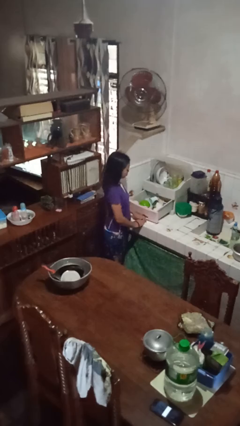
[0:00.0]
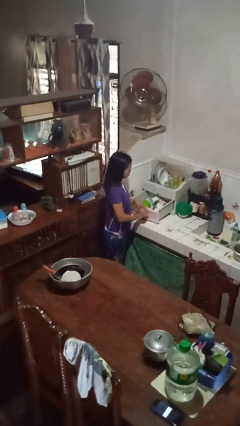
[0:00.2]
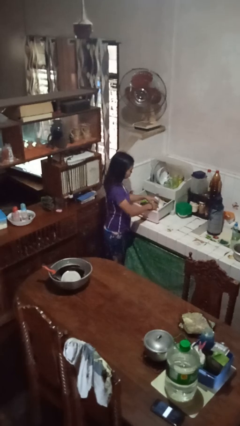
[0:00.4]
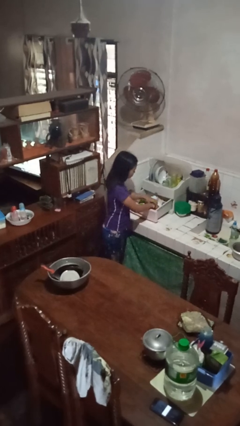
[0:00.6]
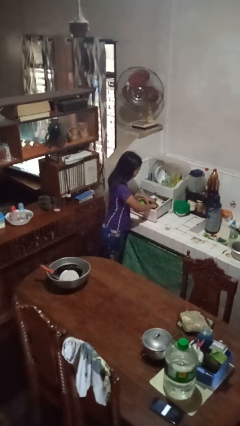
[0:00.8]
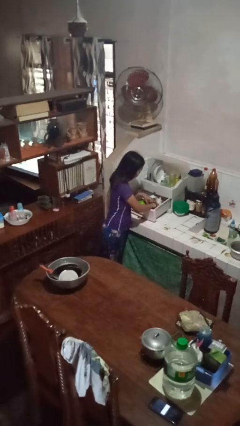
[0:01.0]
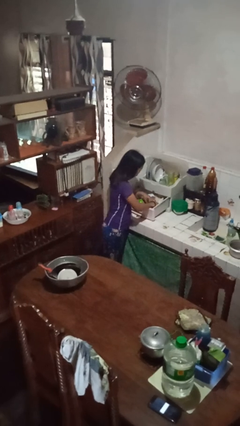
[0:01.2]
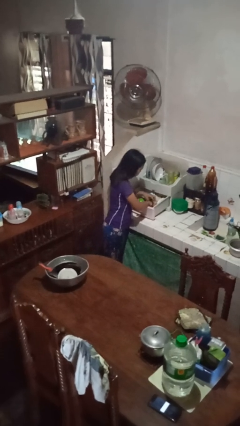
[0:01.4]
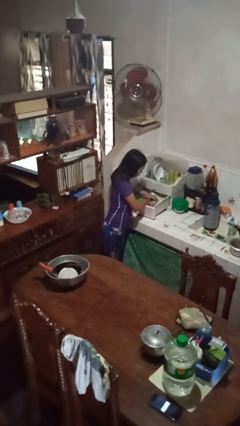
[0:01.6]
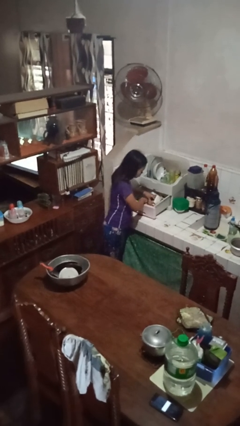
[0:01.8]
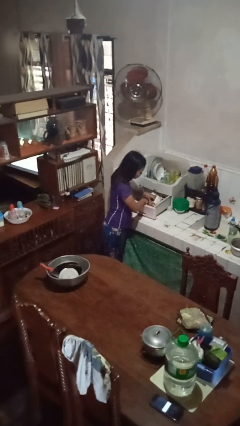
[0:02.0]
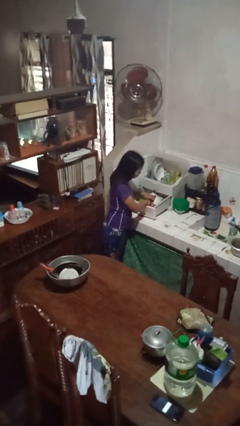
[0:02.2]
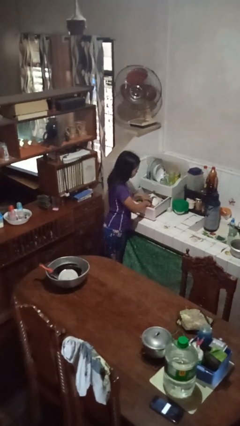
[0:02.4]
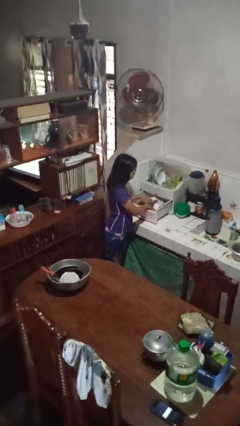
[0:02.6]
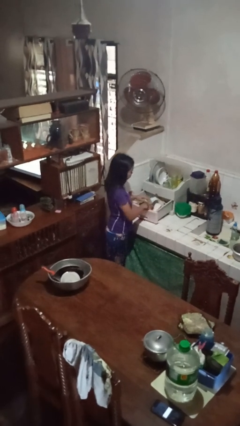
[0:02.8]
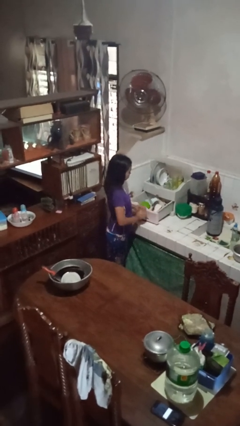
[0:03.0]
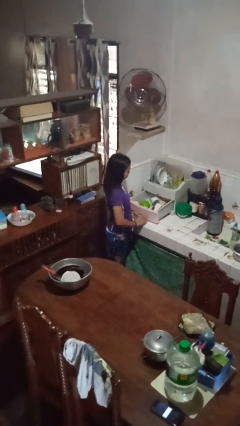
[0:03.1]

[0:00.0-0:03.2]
person searches in kitchen drawer

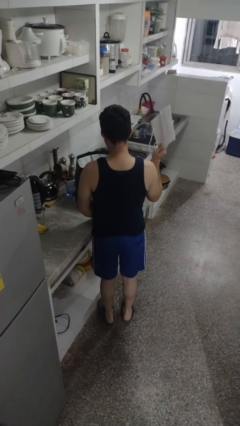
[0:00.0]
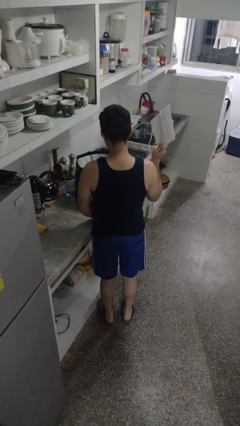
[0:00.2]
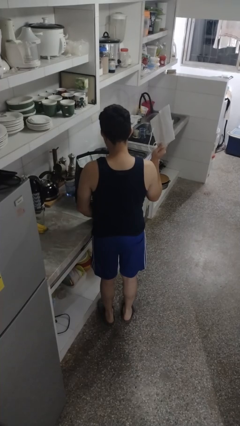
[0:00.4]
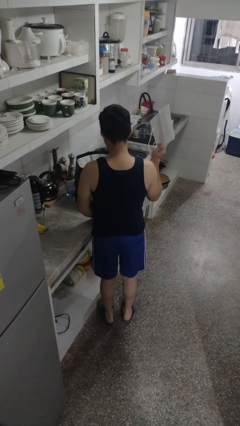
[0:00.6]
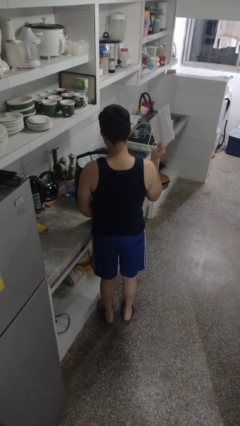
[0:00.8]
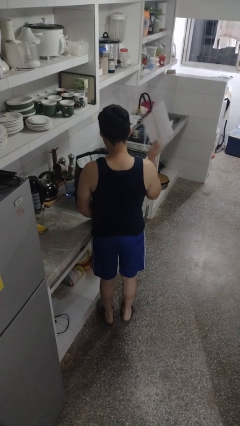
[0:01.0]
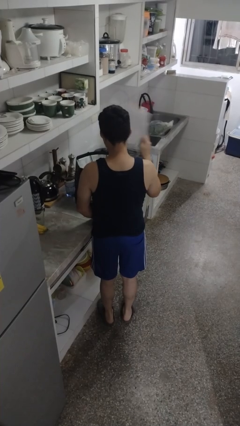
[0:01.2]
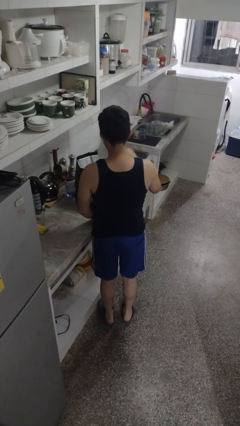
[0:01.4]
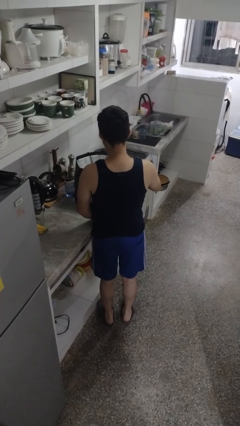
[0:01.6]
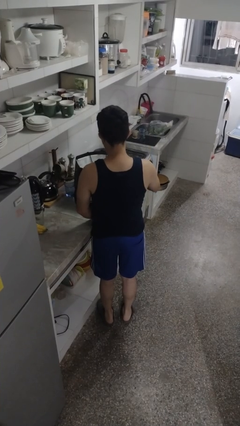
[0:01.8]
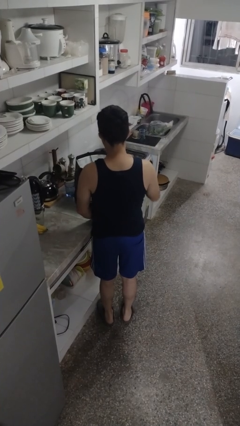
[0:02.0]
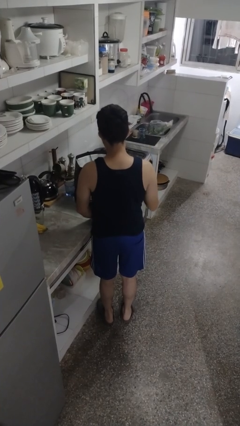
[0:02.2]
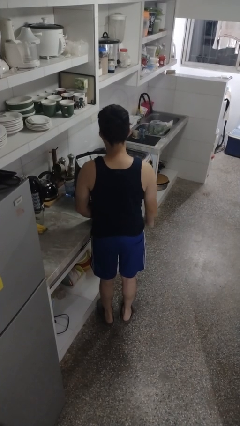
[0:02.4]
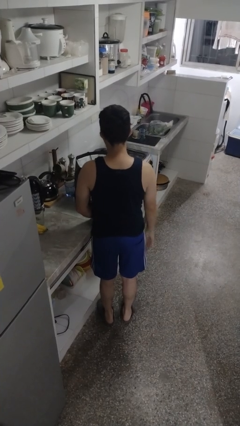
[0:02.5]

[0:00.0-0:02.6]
person puts object into bag

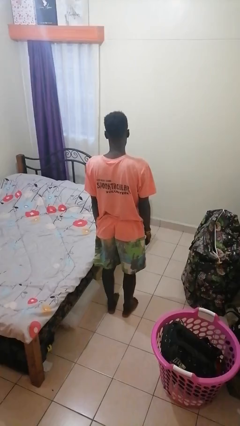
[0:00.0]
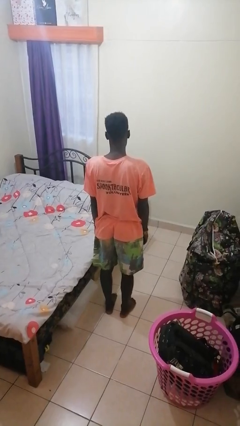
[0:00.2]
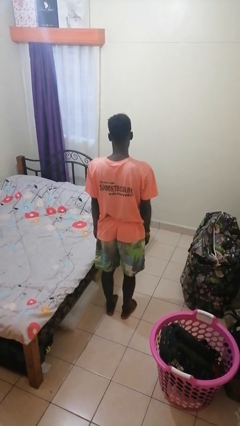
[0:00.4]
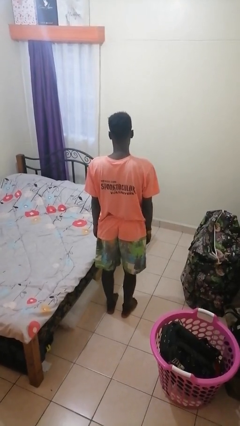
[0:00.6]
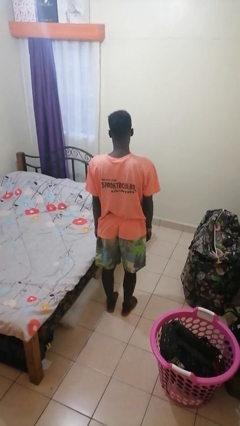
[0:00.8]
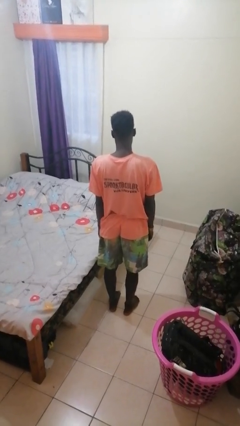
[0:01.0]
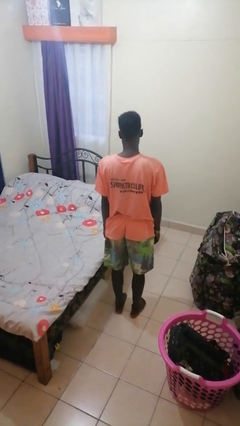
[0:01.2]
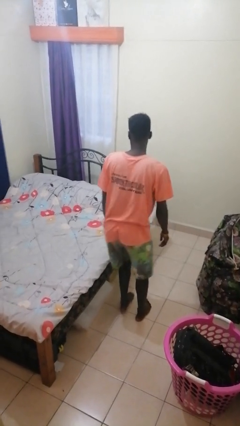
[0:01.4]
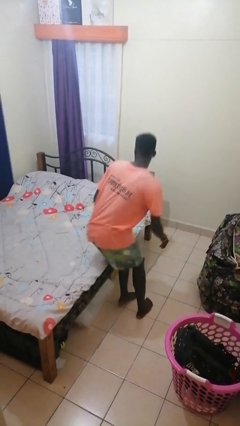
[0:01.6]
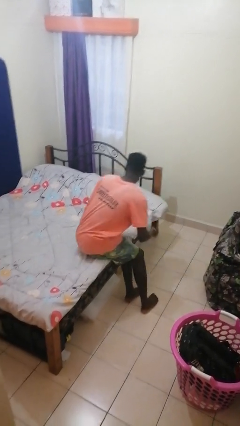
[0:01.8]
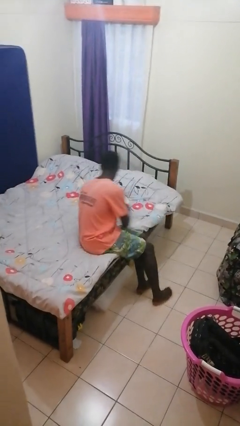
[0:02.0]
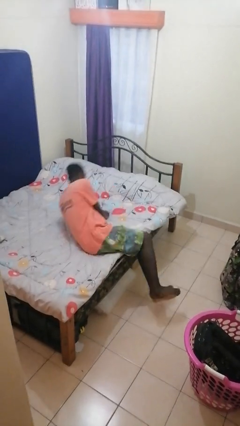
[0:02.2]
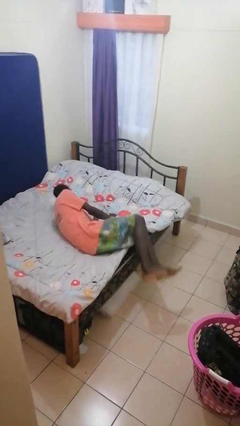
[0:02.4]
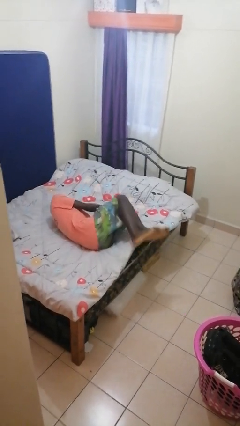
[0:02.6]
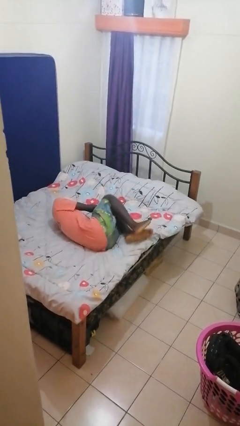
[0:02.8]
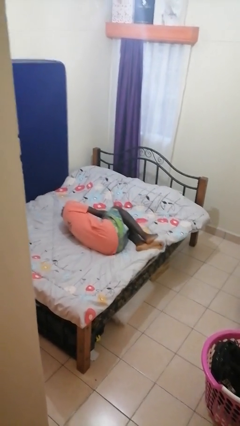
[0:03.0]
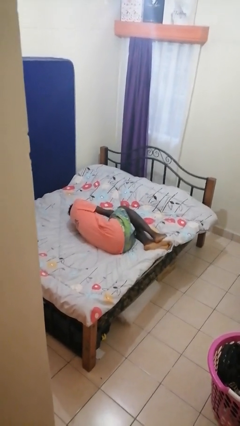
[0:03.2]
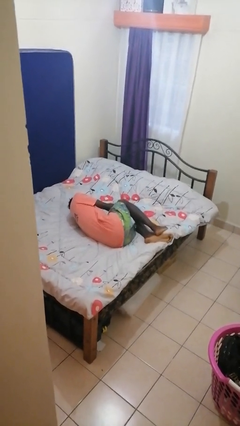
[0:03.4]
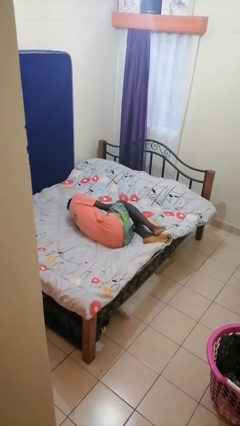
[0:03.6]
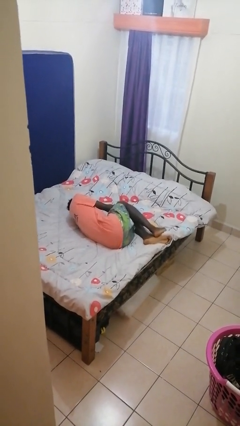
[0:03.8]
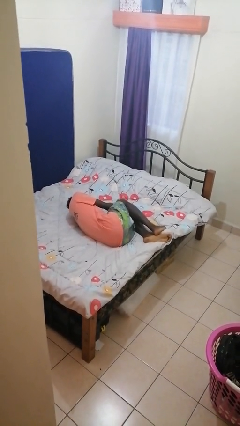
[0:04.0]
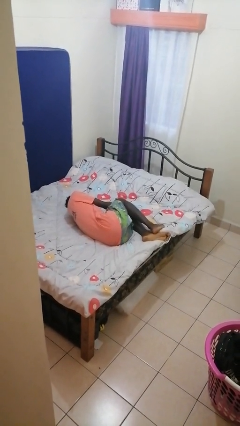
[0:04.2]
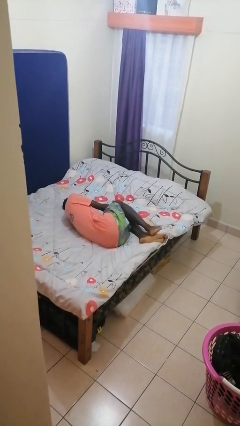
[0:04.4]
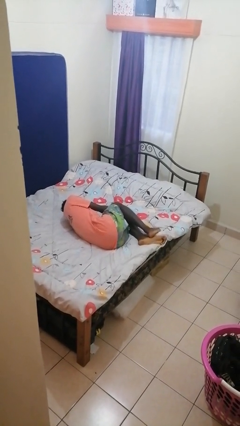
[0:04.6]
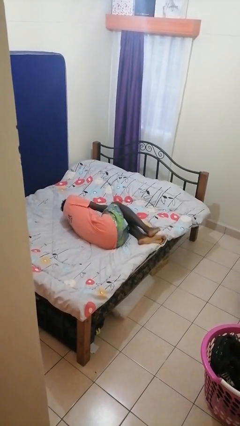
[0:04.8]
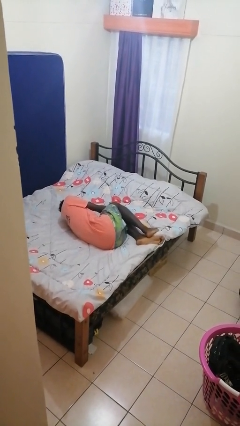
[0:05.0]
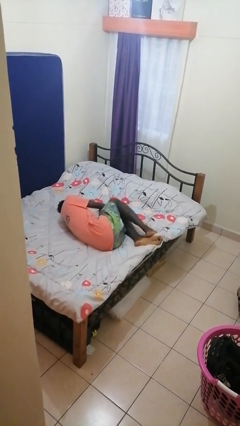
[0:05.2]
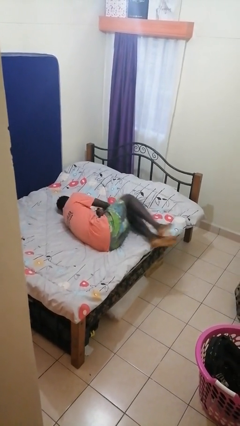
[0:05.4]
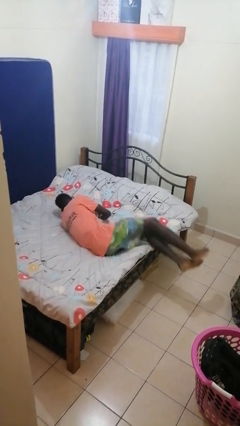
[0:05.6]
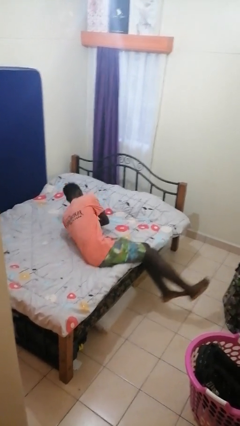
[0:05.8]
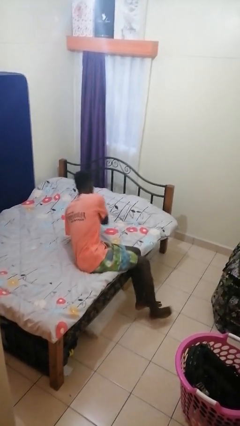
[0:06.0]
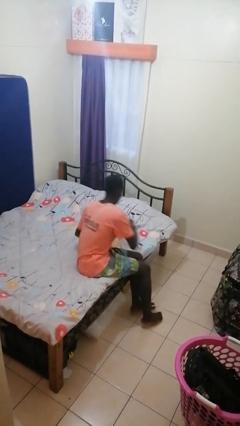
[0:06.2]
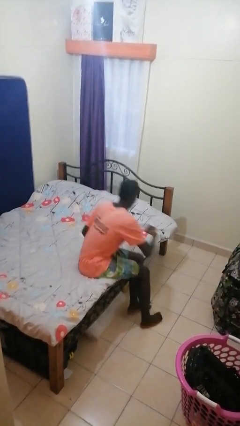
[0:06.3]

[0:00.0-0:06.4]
person puts on shoes

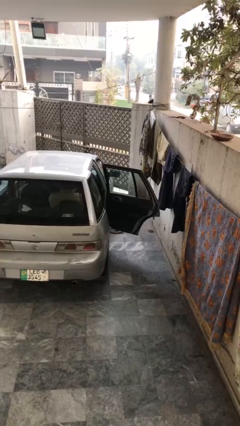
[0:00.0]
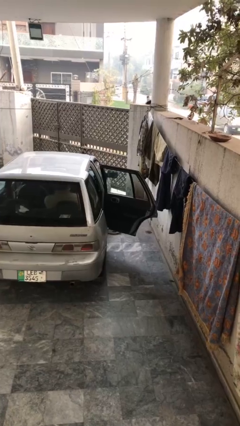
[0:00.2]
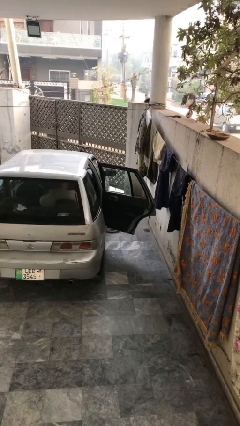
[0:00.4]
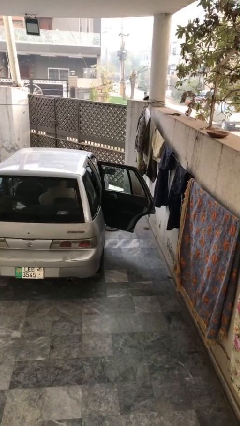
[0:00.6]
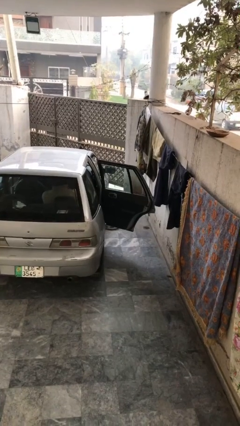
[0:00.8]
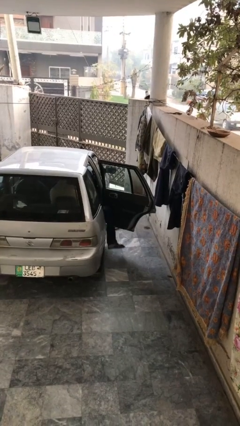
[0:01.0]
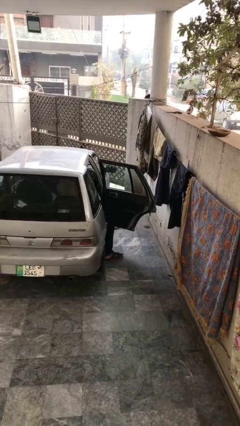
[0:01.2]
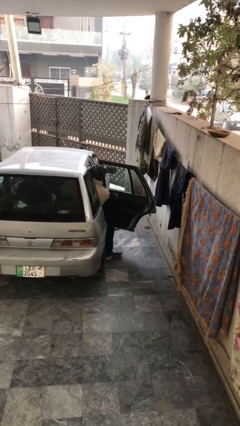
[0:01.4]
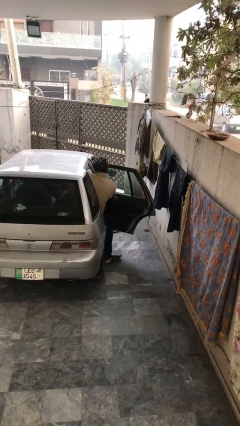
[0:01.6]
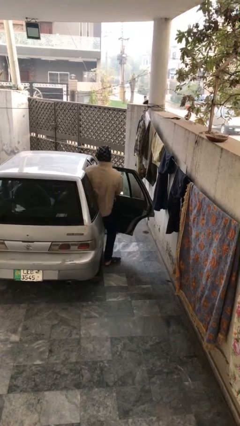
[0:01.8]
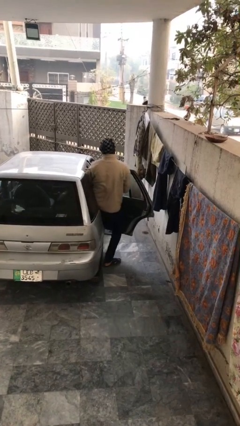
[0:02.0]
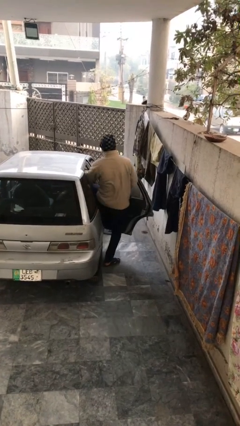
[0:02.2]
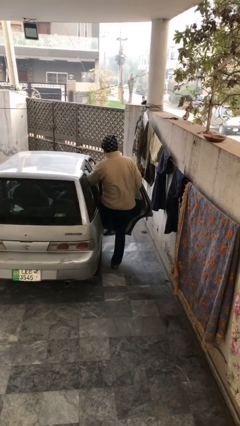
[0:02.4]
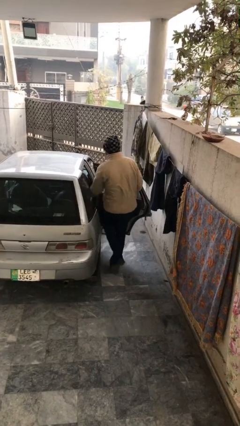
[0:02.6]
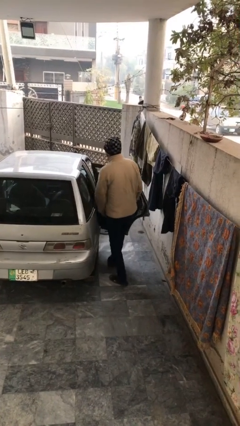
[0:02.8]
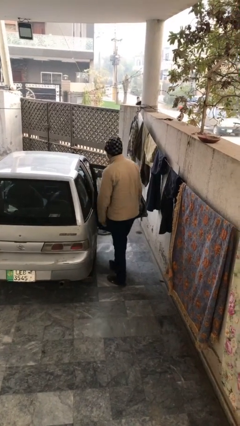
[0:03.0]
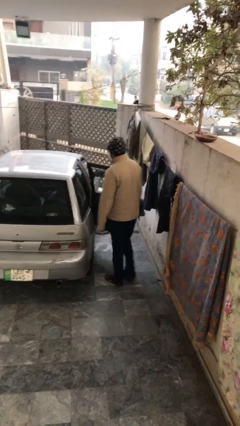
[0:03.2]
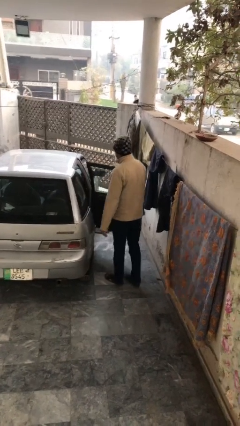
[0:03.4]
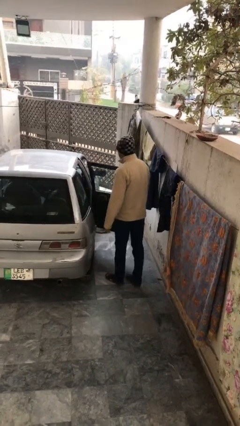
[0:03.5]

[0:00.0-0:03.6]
person exits car

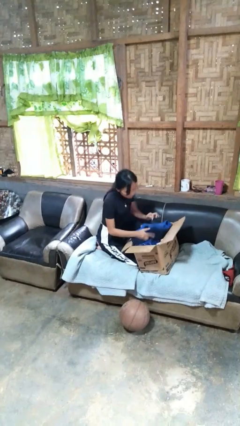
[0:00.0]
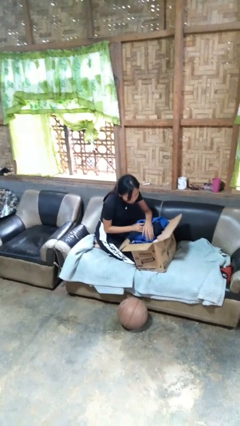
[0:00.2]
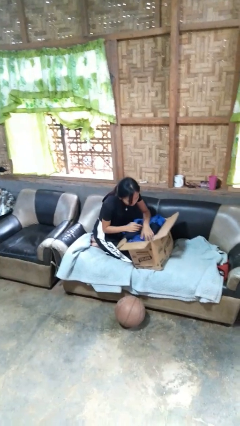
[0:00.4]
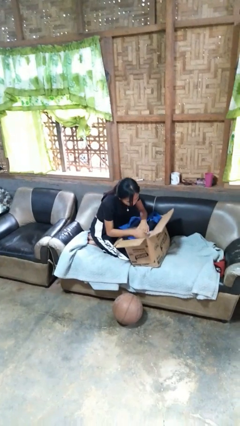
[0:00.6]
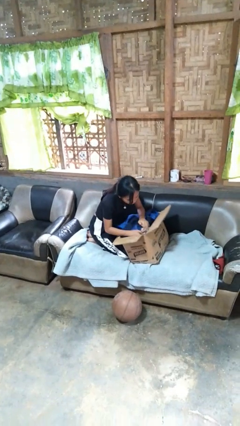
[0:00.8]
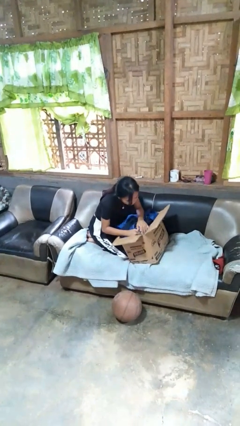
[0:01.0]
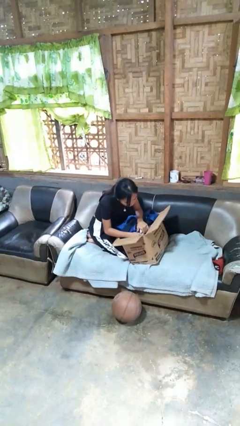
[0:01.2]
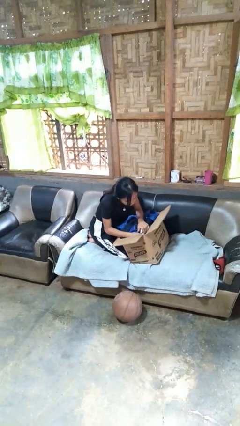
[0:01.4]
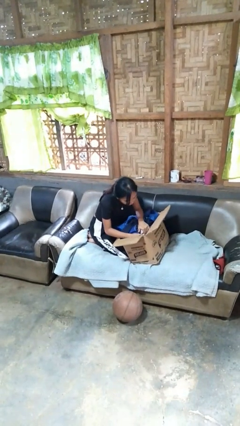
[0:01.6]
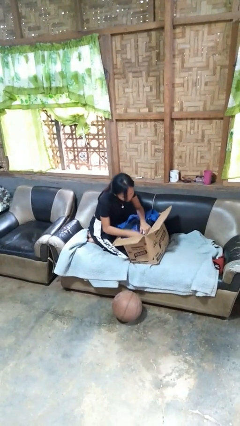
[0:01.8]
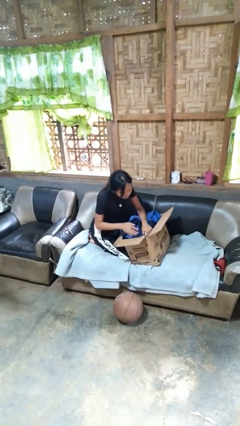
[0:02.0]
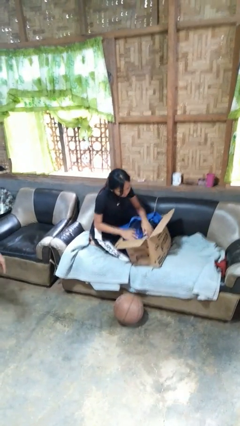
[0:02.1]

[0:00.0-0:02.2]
person searches in box
